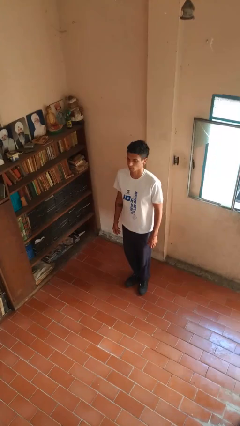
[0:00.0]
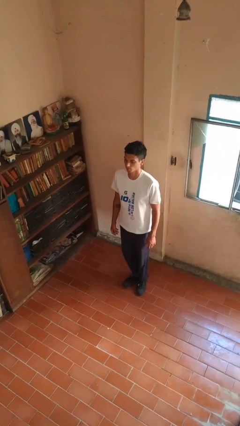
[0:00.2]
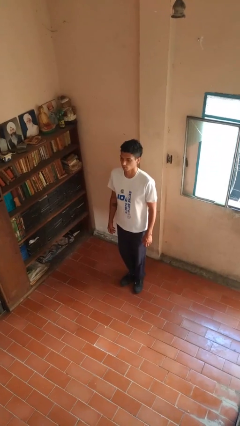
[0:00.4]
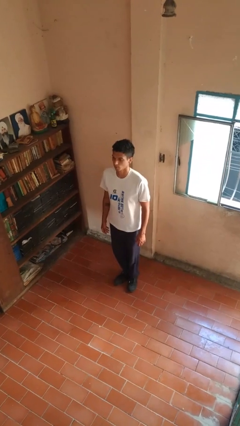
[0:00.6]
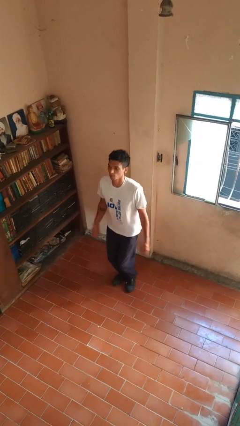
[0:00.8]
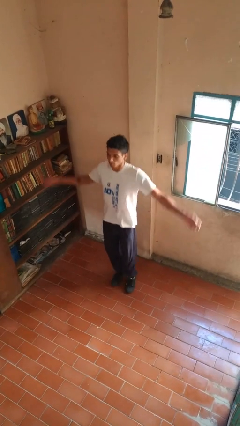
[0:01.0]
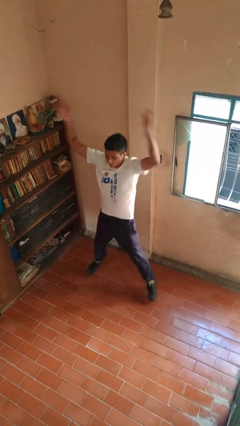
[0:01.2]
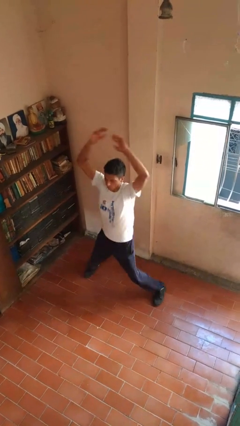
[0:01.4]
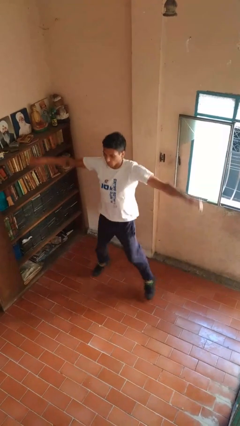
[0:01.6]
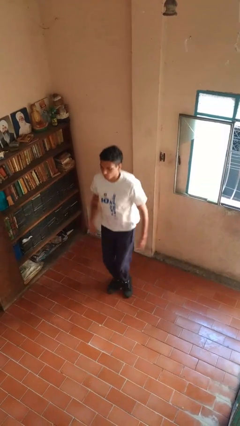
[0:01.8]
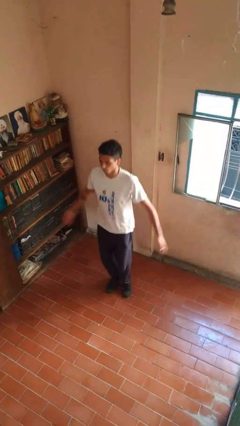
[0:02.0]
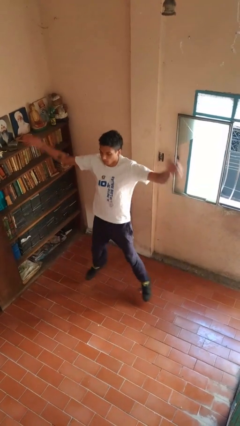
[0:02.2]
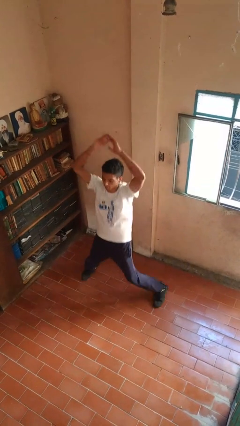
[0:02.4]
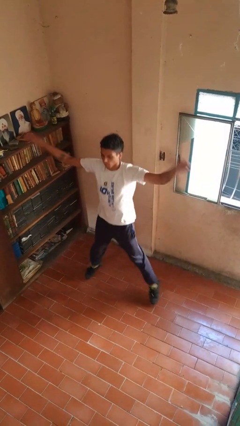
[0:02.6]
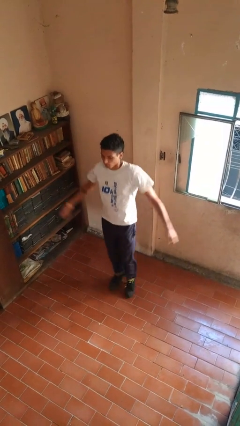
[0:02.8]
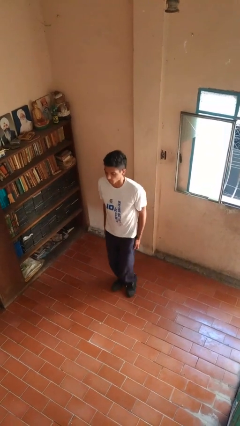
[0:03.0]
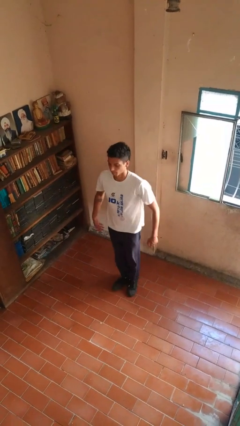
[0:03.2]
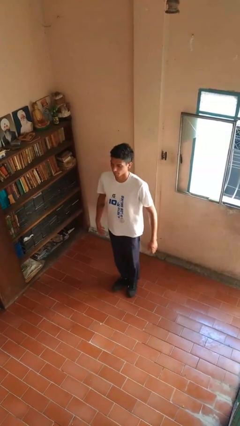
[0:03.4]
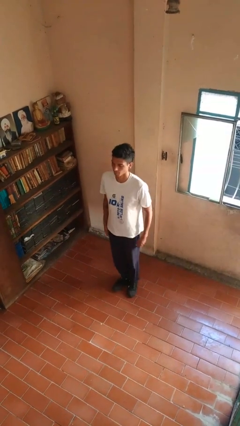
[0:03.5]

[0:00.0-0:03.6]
person exercises with jumping jacks

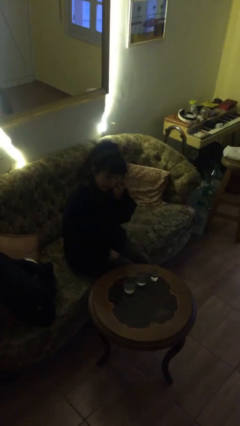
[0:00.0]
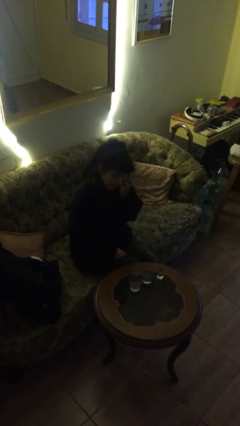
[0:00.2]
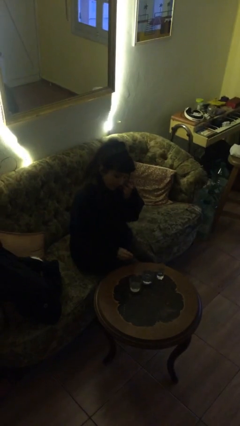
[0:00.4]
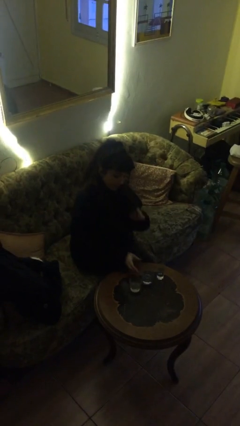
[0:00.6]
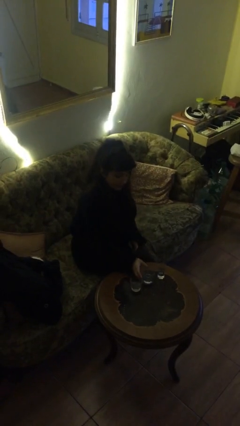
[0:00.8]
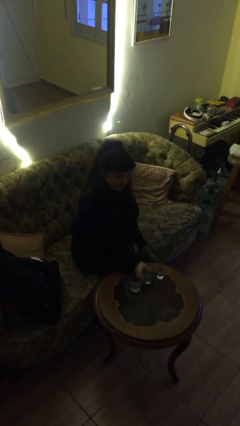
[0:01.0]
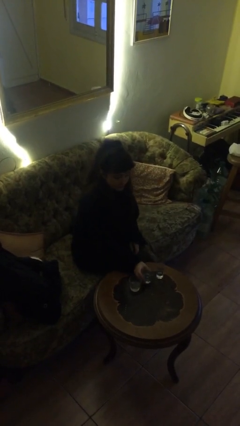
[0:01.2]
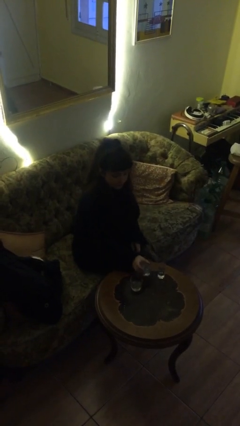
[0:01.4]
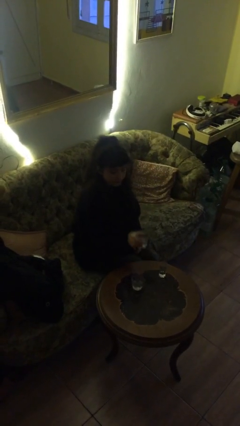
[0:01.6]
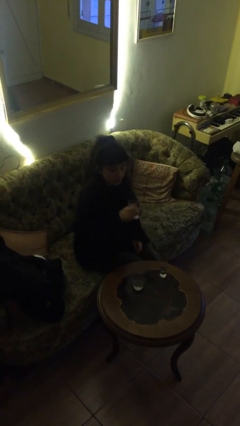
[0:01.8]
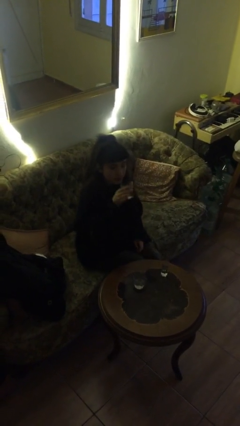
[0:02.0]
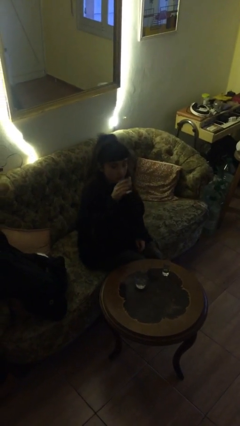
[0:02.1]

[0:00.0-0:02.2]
person picks up object from table

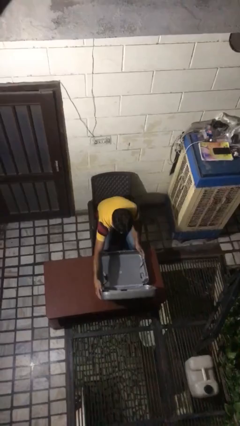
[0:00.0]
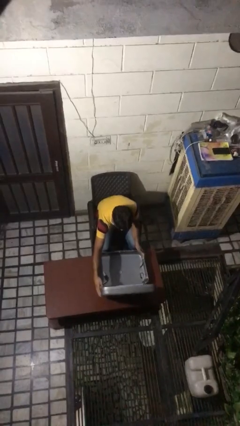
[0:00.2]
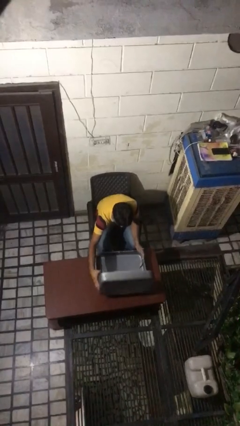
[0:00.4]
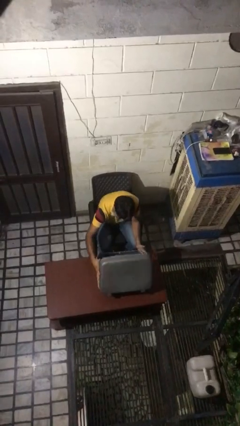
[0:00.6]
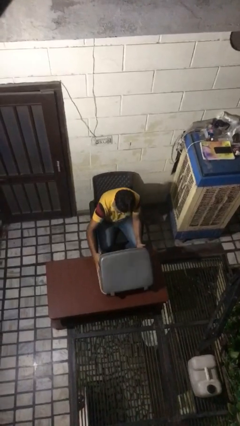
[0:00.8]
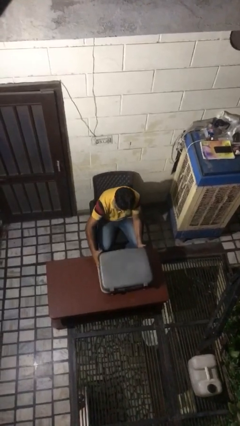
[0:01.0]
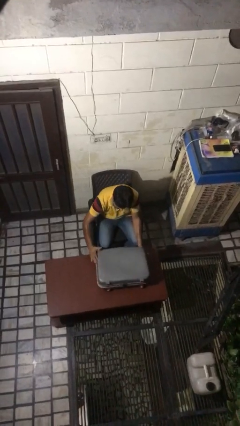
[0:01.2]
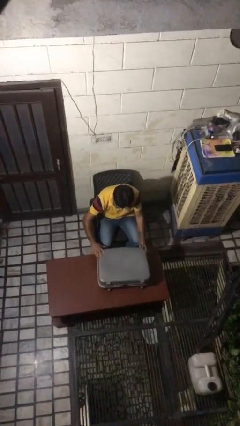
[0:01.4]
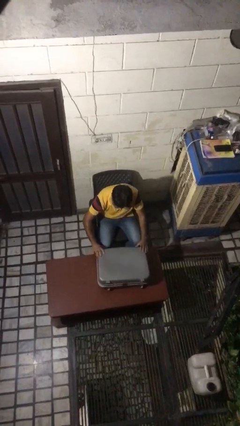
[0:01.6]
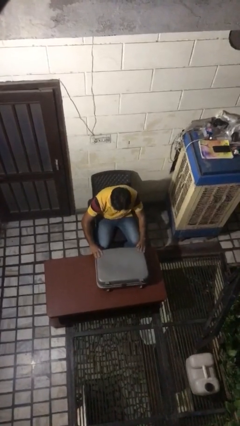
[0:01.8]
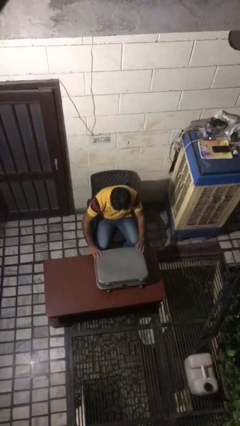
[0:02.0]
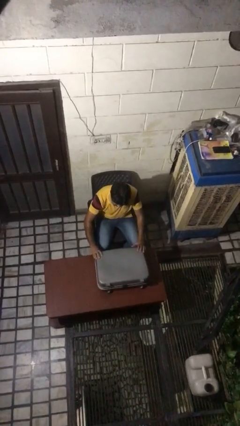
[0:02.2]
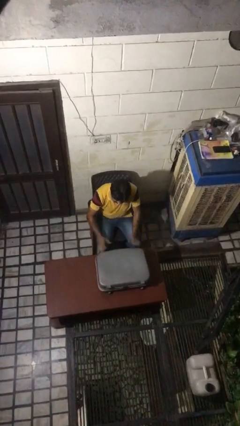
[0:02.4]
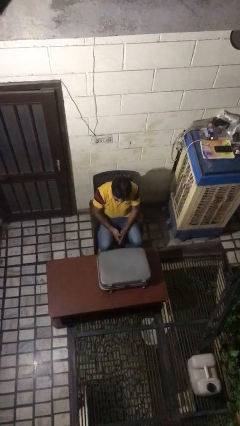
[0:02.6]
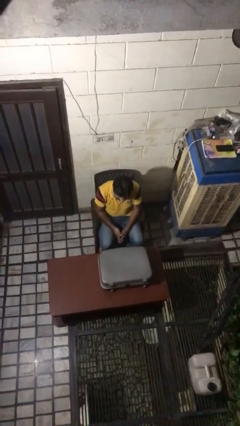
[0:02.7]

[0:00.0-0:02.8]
person closes suitcase

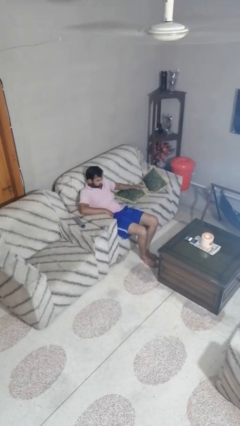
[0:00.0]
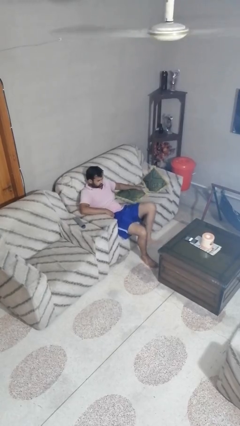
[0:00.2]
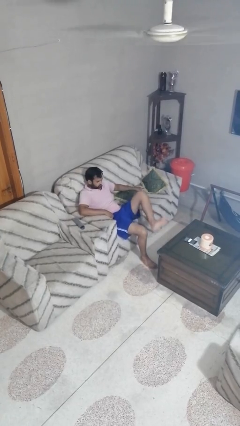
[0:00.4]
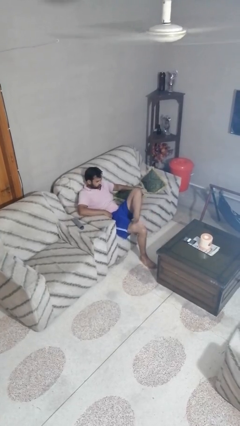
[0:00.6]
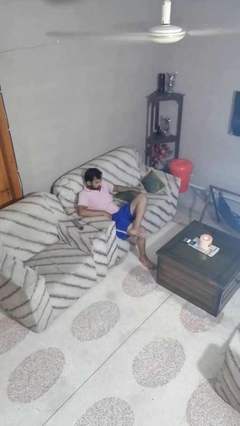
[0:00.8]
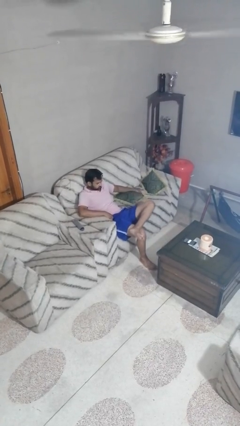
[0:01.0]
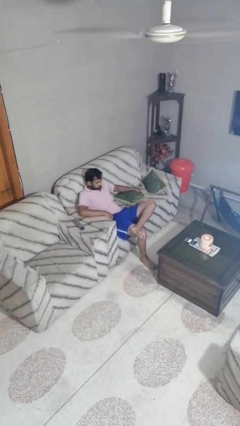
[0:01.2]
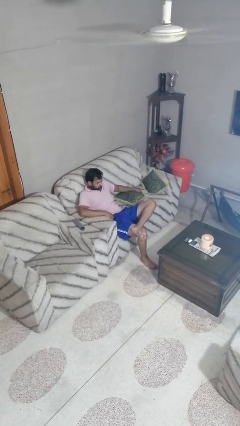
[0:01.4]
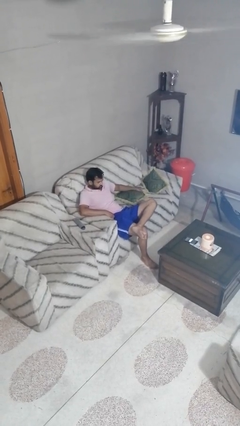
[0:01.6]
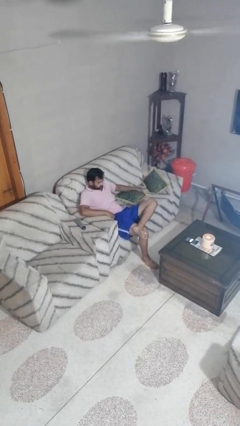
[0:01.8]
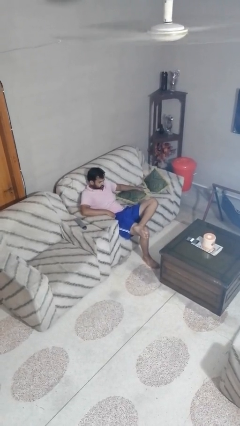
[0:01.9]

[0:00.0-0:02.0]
person crosses legs

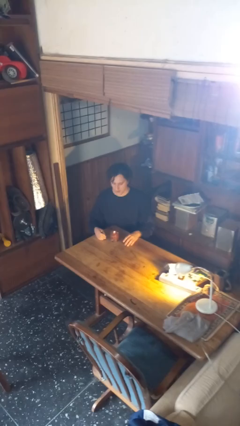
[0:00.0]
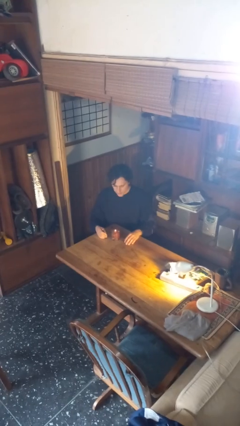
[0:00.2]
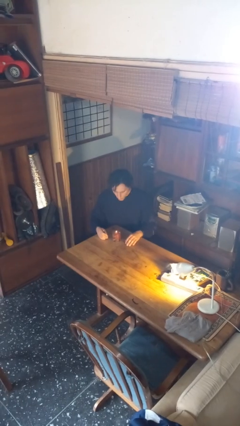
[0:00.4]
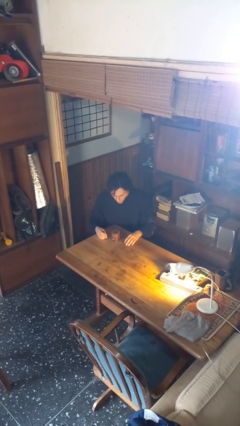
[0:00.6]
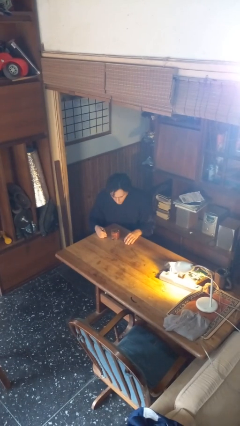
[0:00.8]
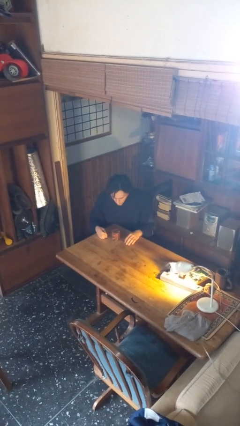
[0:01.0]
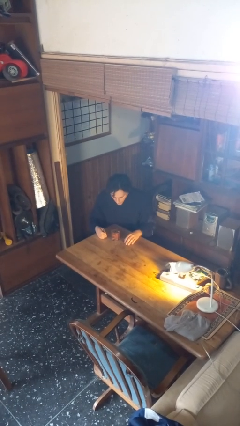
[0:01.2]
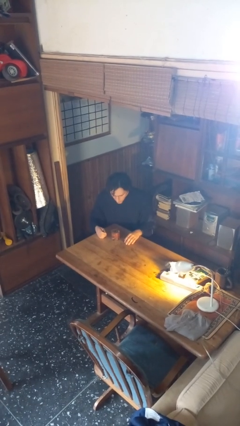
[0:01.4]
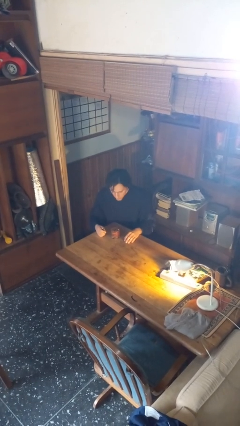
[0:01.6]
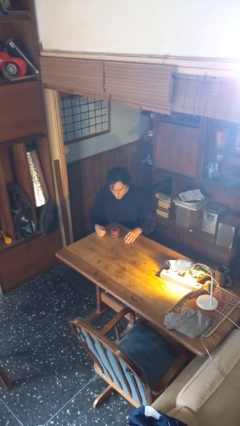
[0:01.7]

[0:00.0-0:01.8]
person extinguishes candle

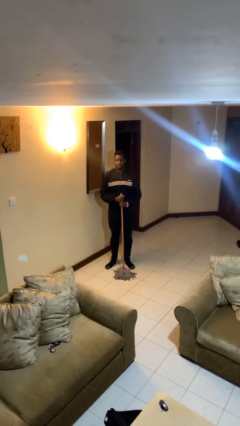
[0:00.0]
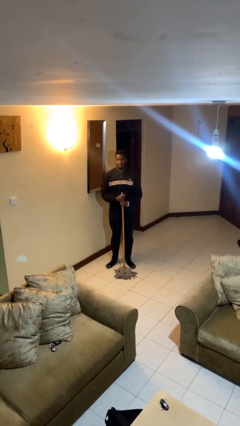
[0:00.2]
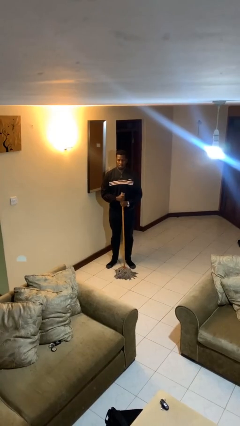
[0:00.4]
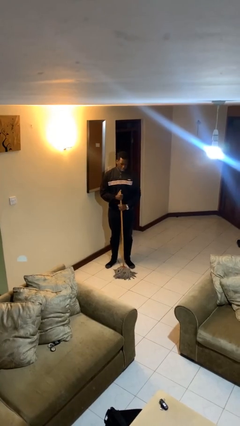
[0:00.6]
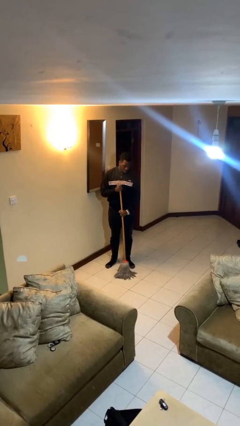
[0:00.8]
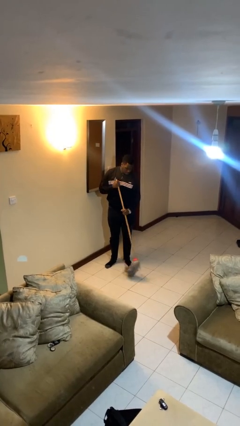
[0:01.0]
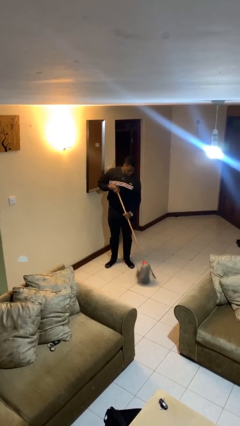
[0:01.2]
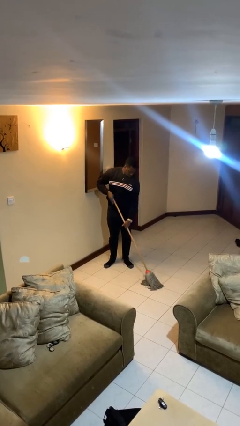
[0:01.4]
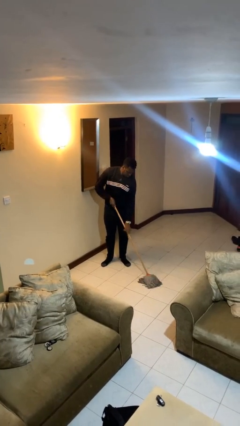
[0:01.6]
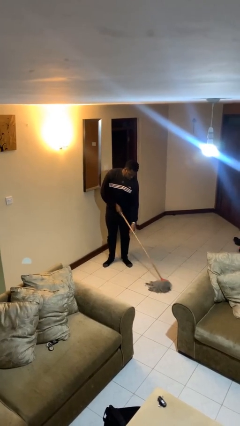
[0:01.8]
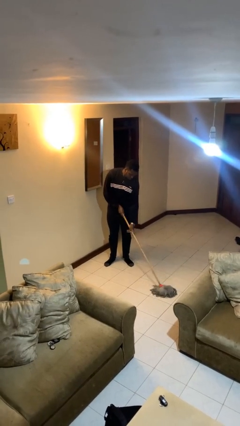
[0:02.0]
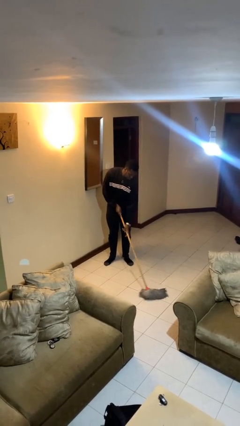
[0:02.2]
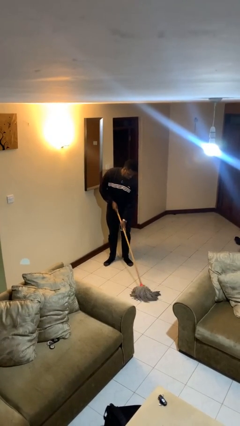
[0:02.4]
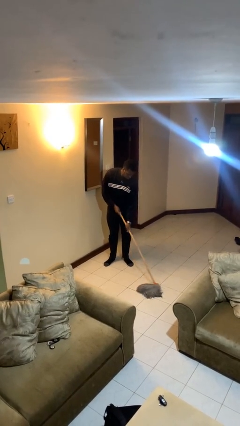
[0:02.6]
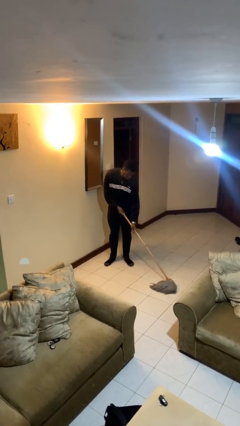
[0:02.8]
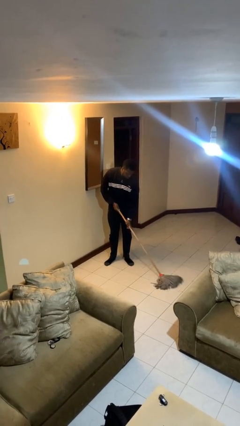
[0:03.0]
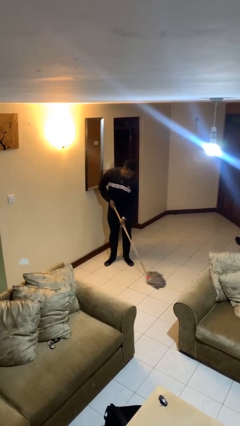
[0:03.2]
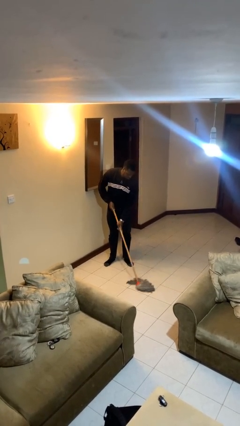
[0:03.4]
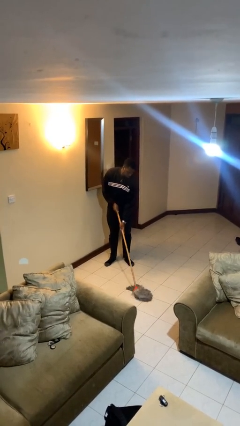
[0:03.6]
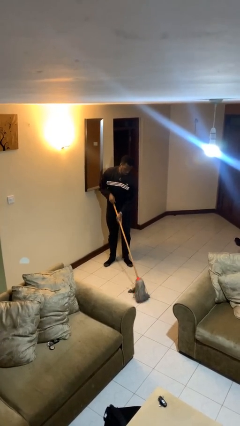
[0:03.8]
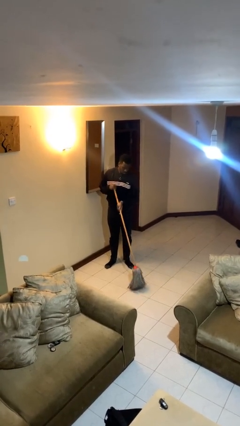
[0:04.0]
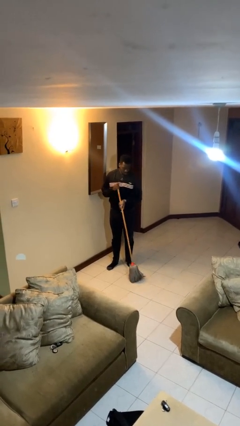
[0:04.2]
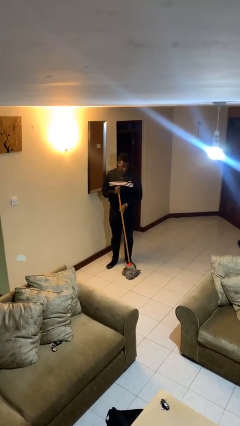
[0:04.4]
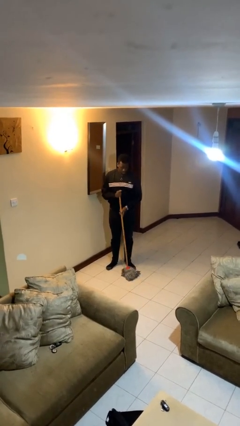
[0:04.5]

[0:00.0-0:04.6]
person mops
